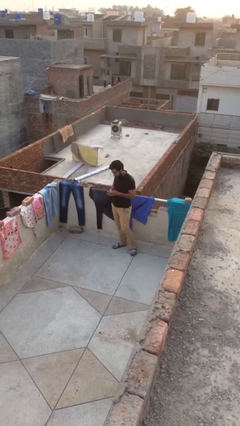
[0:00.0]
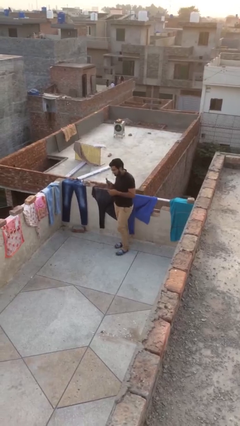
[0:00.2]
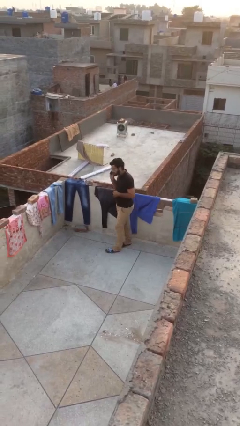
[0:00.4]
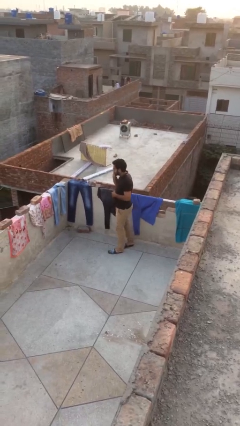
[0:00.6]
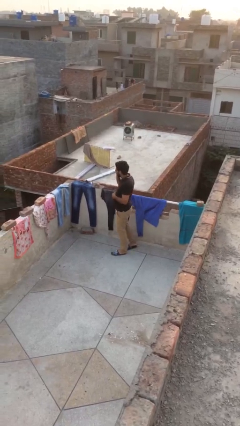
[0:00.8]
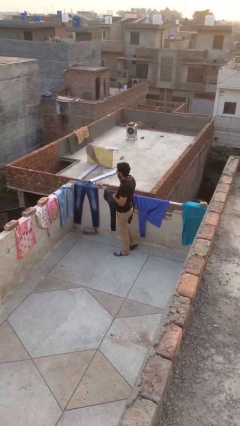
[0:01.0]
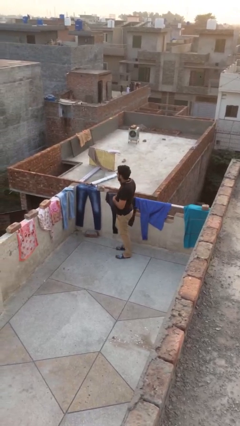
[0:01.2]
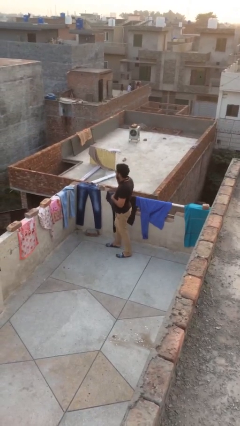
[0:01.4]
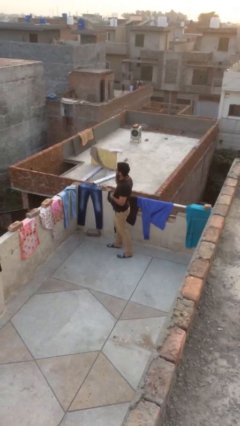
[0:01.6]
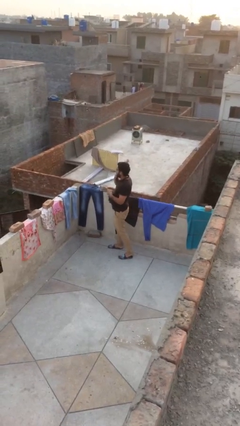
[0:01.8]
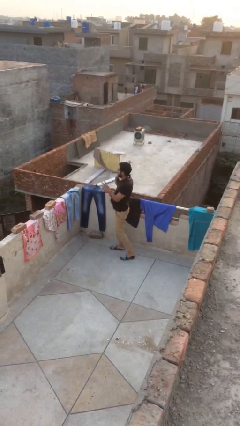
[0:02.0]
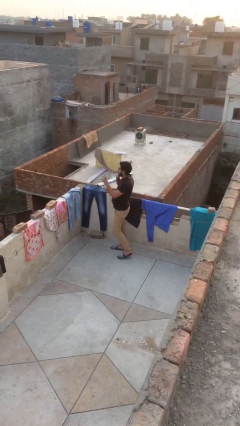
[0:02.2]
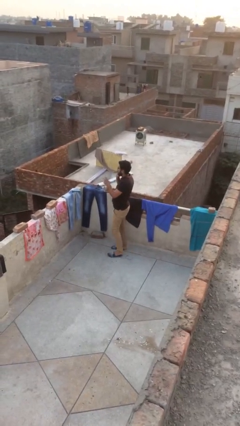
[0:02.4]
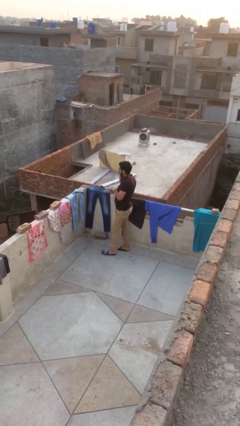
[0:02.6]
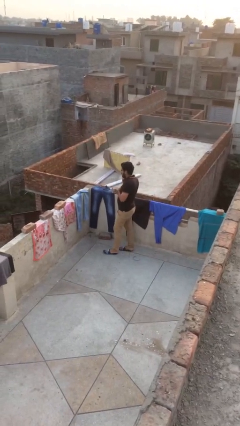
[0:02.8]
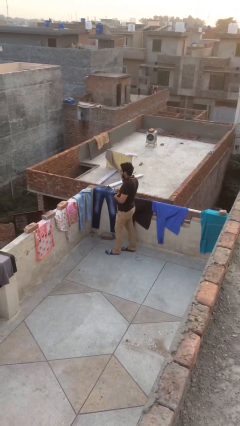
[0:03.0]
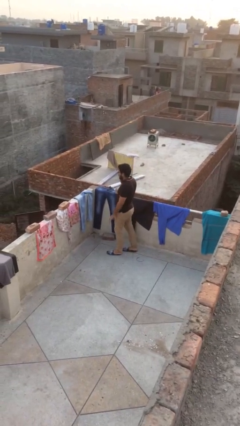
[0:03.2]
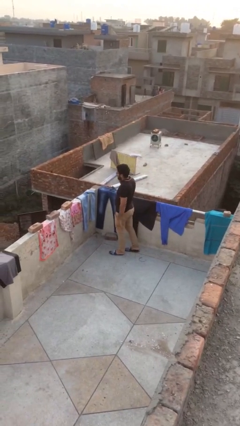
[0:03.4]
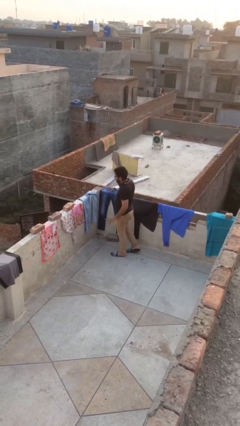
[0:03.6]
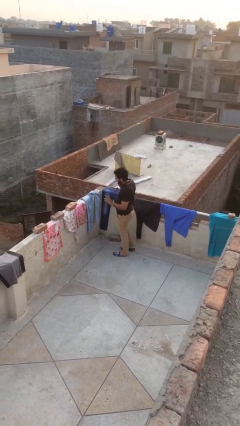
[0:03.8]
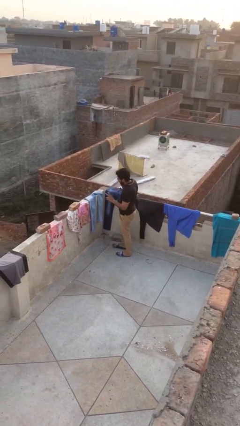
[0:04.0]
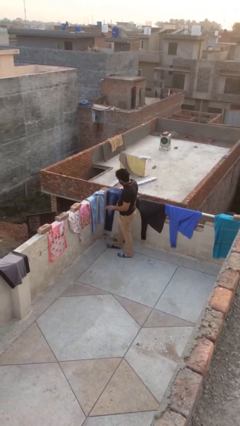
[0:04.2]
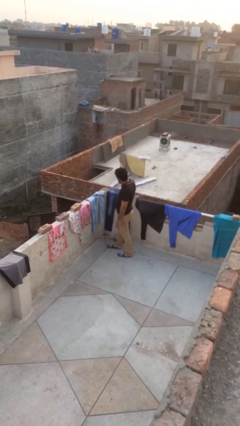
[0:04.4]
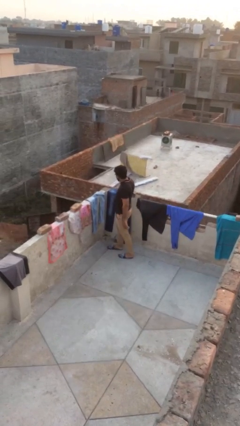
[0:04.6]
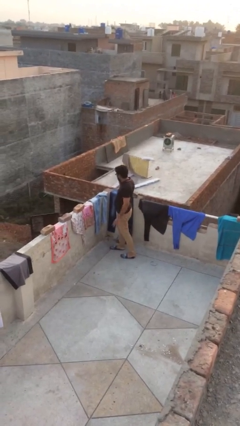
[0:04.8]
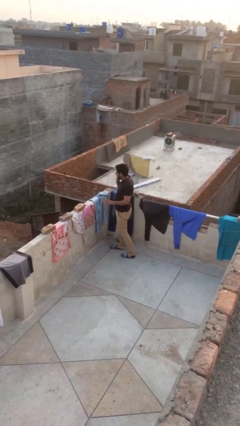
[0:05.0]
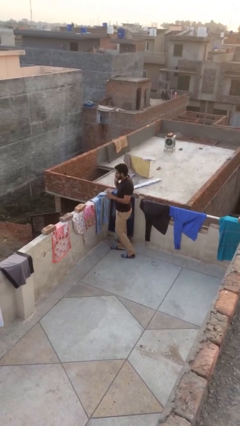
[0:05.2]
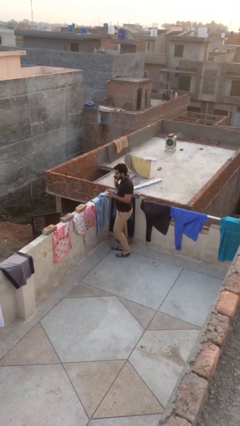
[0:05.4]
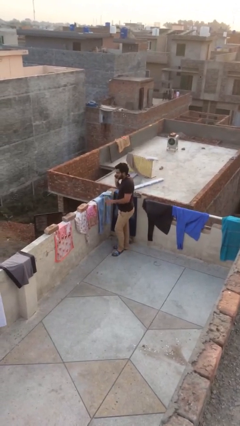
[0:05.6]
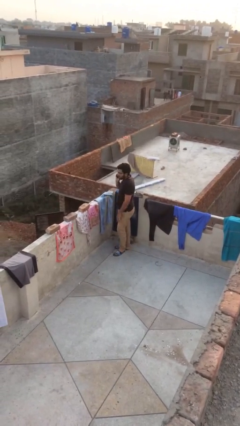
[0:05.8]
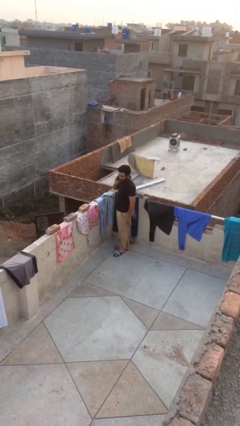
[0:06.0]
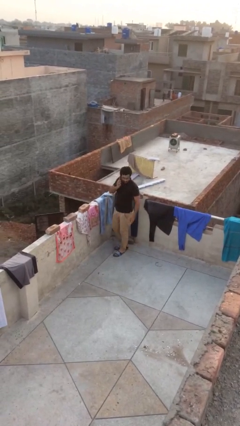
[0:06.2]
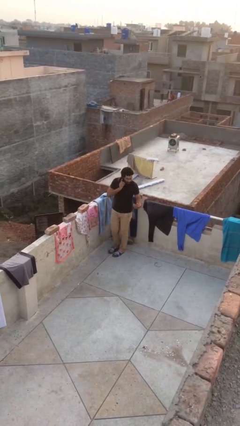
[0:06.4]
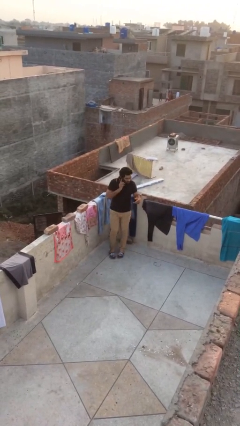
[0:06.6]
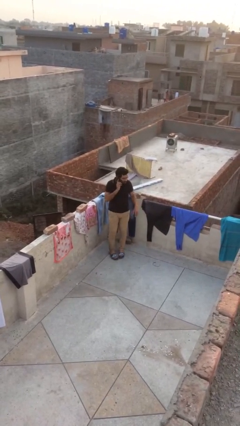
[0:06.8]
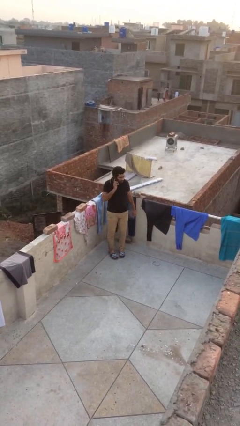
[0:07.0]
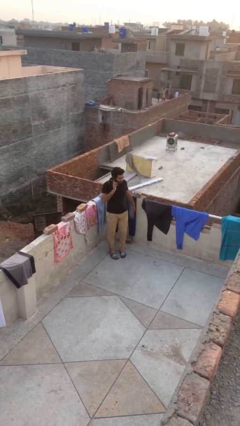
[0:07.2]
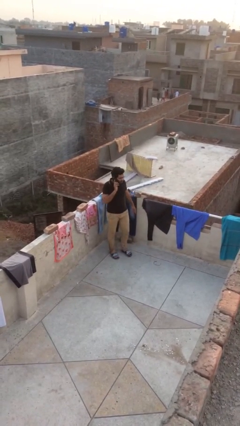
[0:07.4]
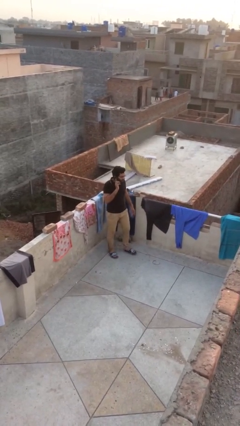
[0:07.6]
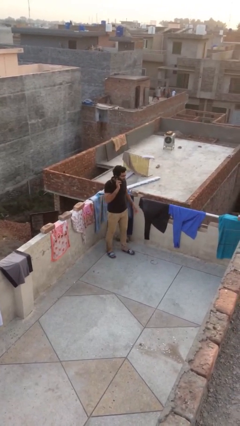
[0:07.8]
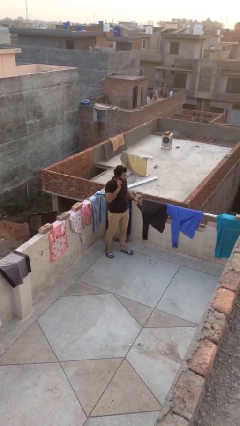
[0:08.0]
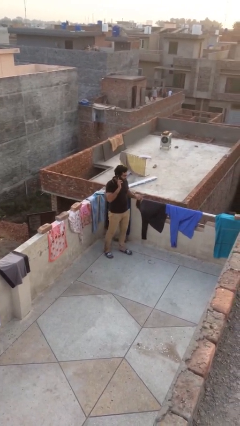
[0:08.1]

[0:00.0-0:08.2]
person talks on phone

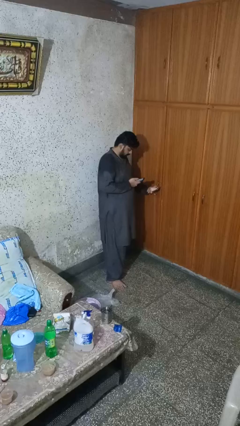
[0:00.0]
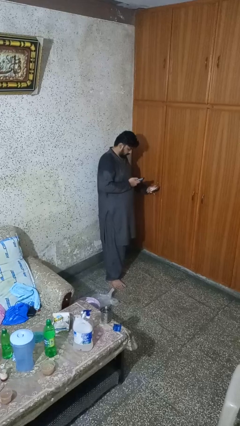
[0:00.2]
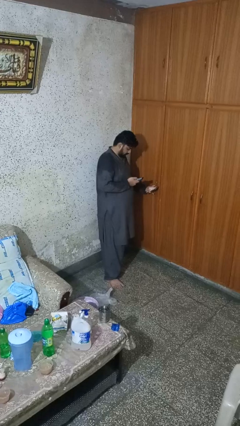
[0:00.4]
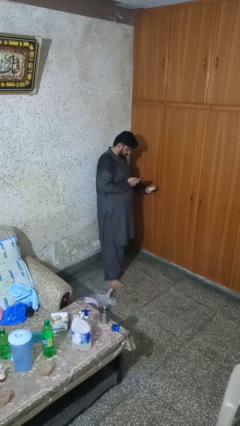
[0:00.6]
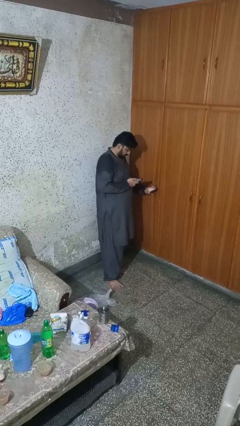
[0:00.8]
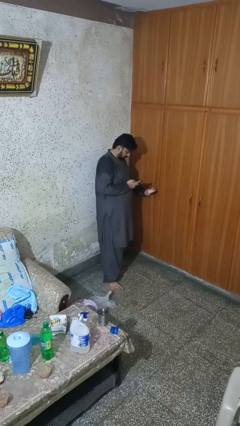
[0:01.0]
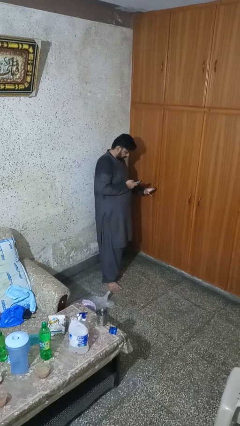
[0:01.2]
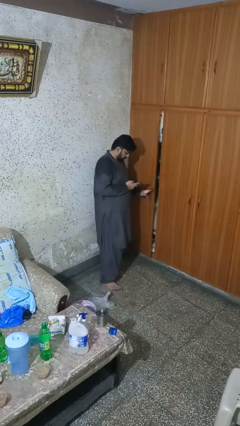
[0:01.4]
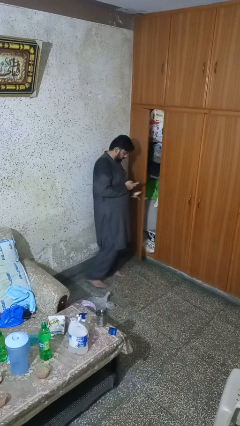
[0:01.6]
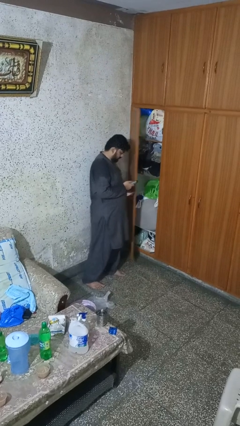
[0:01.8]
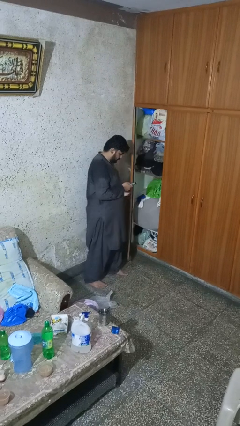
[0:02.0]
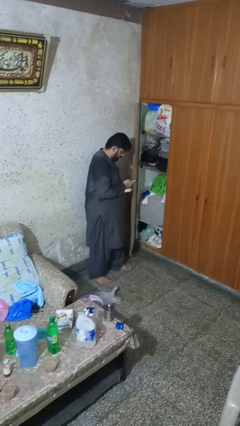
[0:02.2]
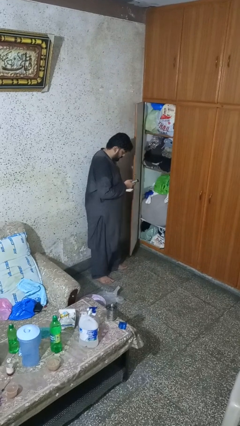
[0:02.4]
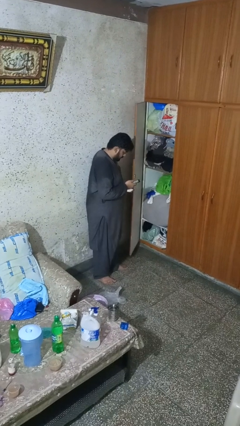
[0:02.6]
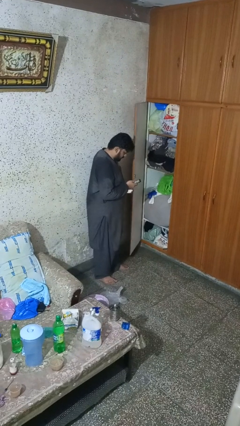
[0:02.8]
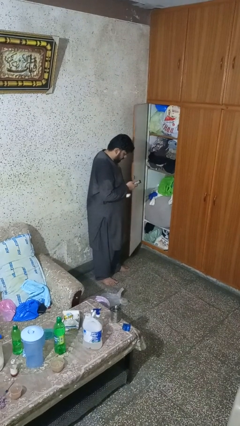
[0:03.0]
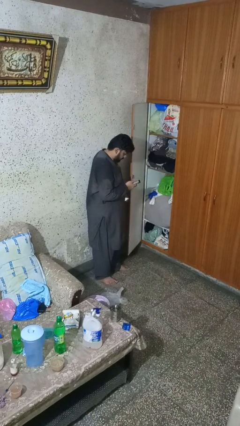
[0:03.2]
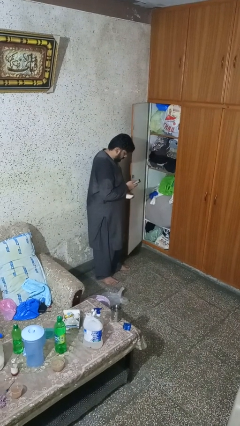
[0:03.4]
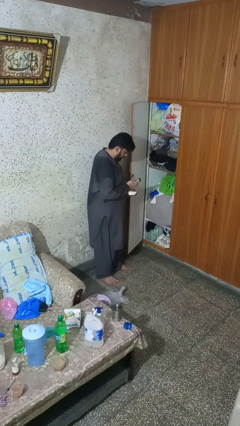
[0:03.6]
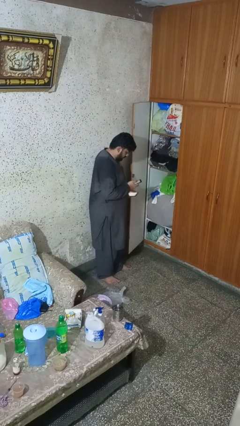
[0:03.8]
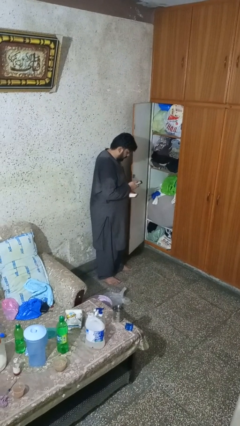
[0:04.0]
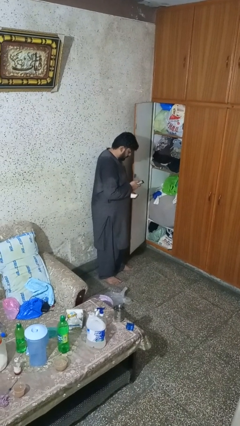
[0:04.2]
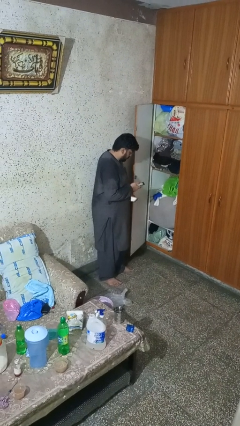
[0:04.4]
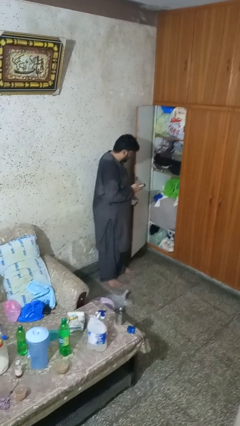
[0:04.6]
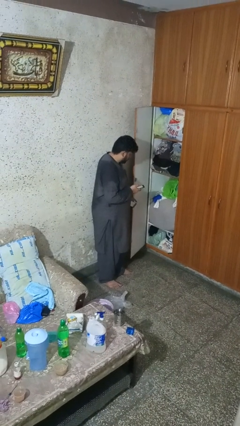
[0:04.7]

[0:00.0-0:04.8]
person opens closet door

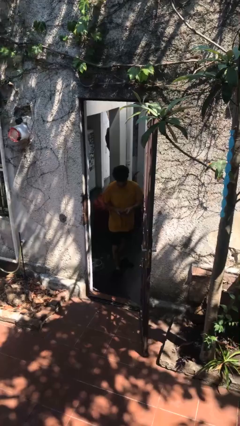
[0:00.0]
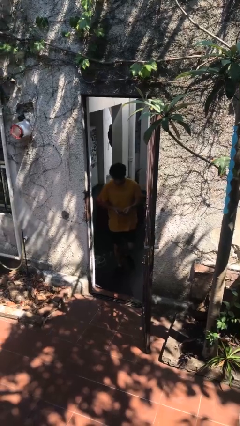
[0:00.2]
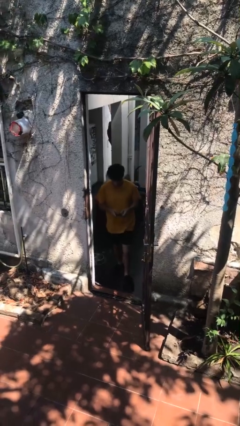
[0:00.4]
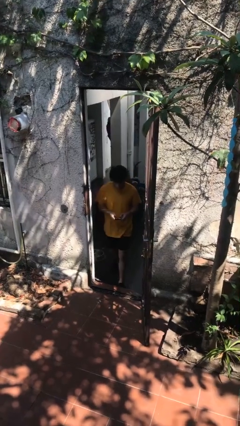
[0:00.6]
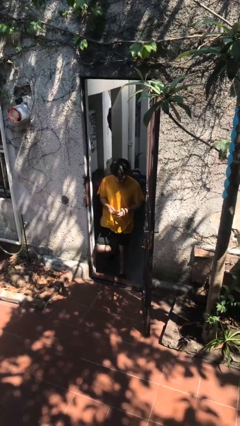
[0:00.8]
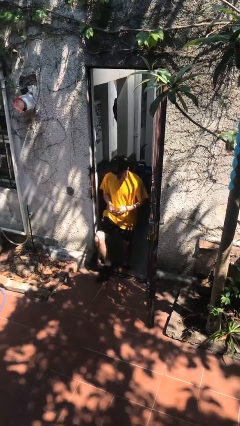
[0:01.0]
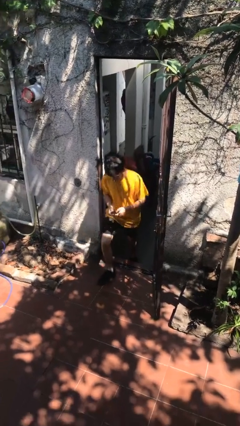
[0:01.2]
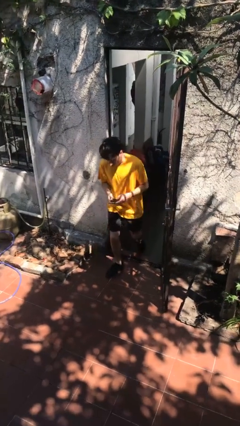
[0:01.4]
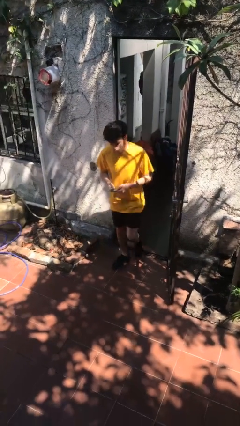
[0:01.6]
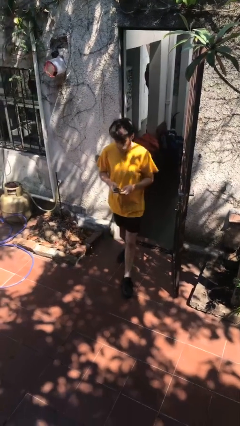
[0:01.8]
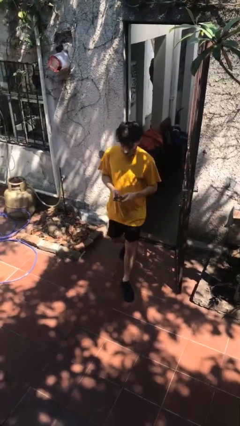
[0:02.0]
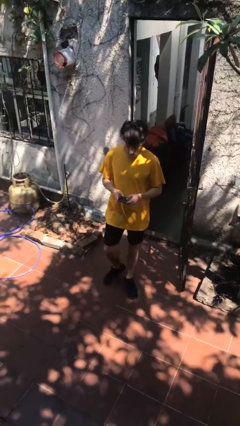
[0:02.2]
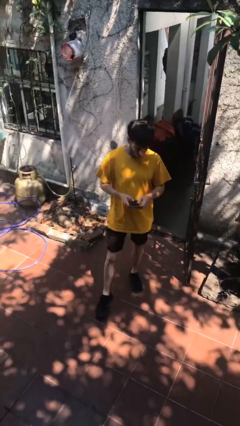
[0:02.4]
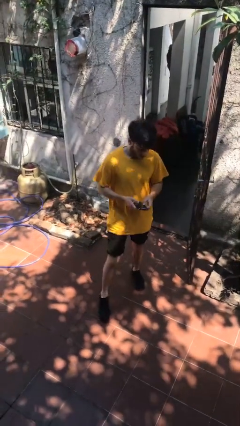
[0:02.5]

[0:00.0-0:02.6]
person enters scene through structure

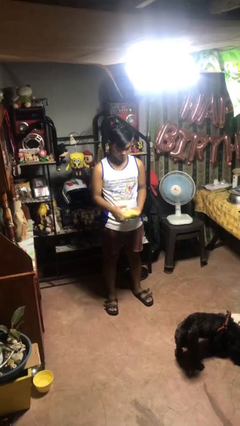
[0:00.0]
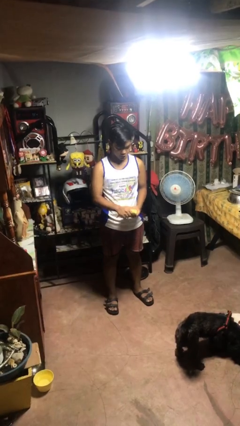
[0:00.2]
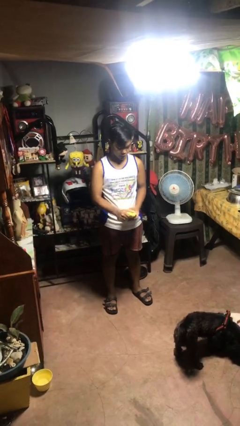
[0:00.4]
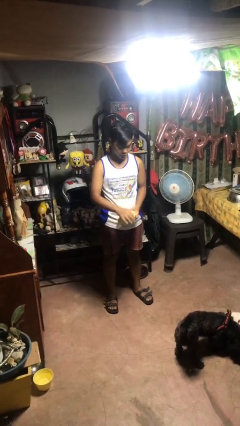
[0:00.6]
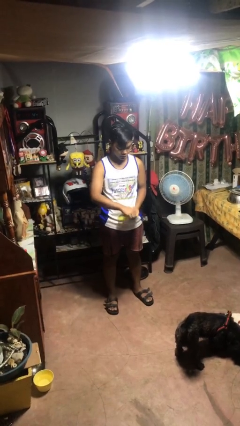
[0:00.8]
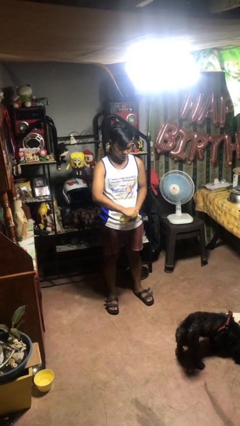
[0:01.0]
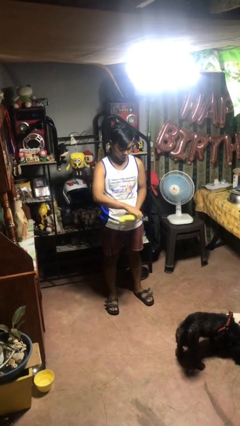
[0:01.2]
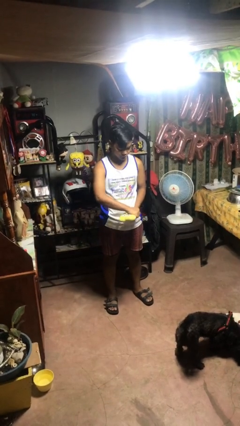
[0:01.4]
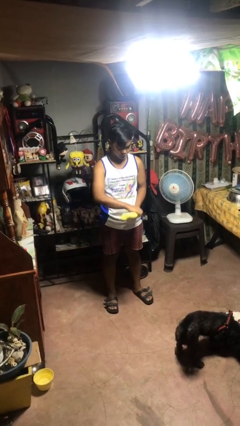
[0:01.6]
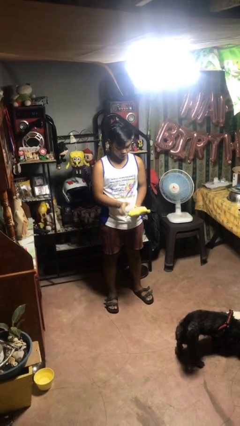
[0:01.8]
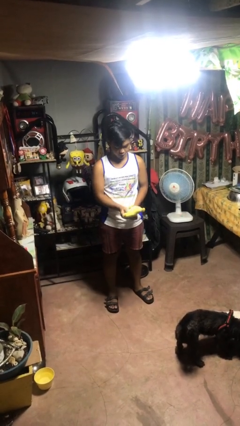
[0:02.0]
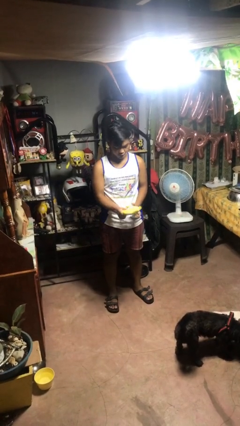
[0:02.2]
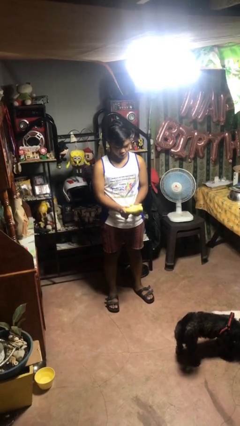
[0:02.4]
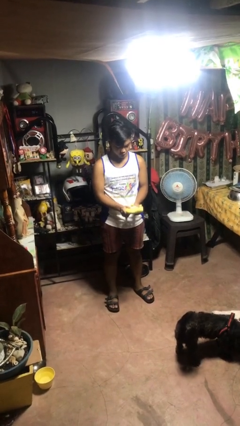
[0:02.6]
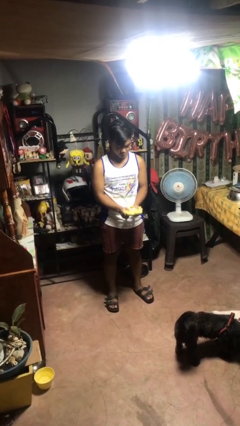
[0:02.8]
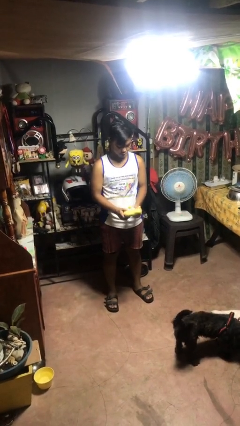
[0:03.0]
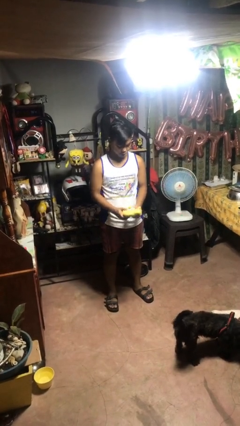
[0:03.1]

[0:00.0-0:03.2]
person squeezes object
